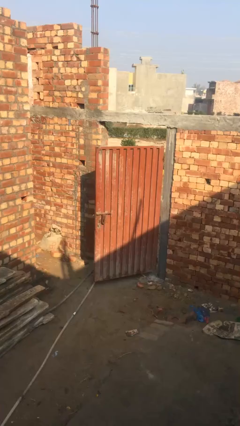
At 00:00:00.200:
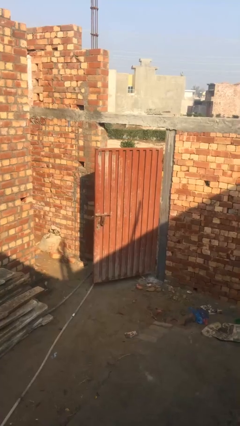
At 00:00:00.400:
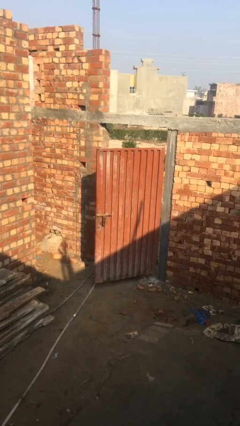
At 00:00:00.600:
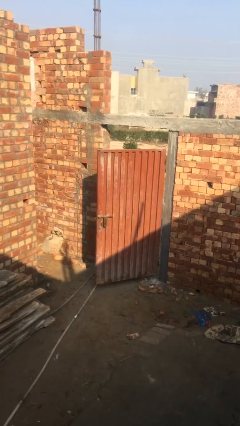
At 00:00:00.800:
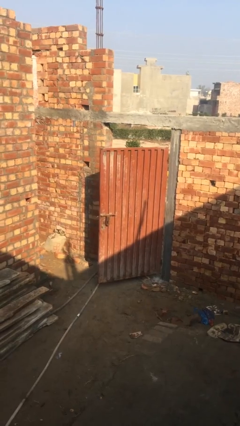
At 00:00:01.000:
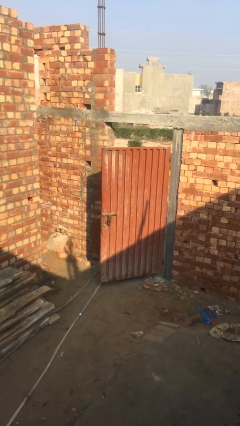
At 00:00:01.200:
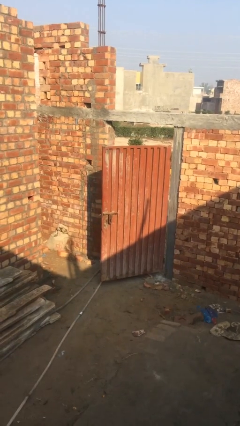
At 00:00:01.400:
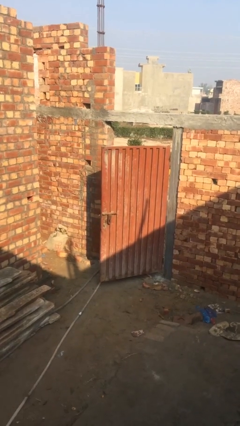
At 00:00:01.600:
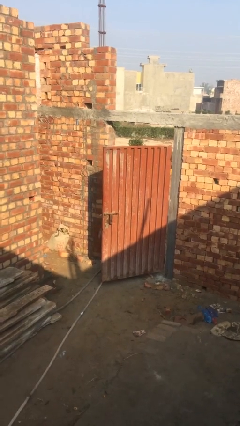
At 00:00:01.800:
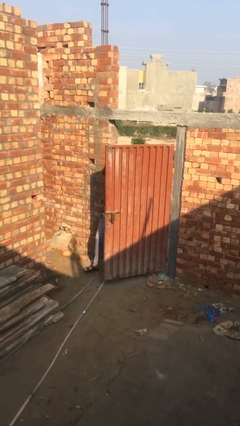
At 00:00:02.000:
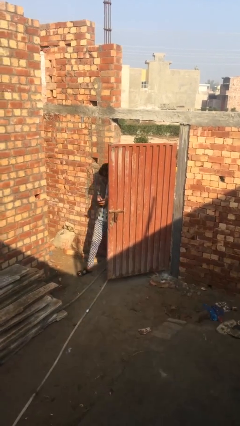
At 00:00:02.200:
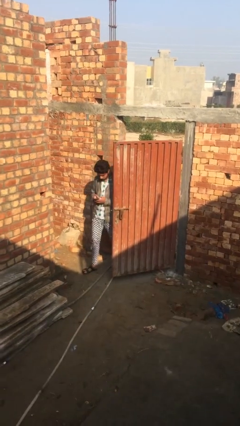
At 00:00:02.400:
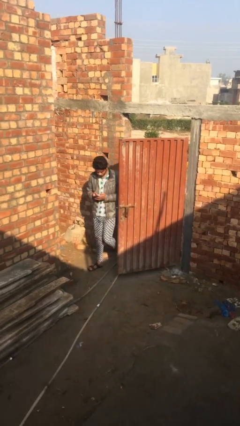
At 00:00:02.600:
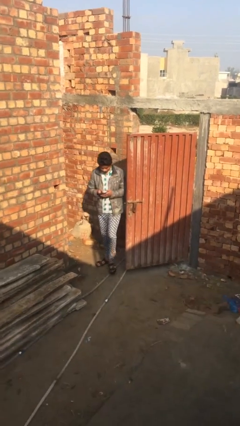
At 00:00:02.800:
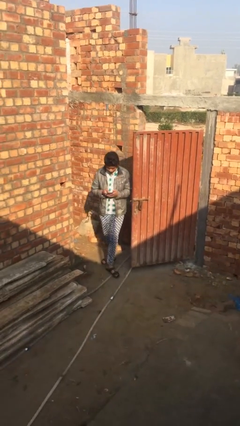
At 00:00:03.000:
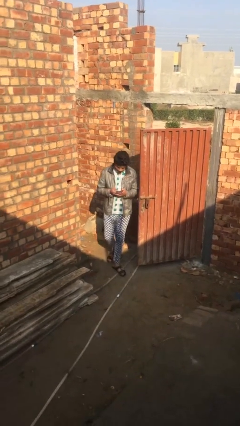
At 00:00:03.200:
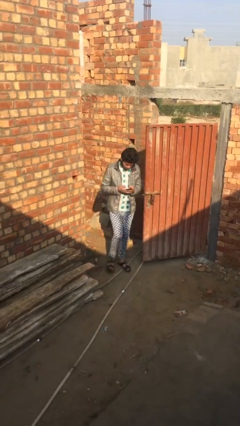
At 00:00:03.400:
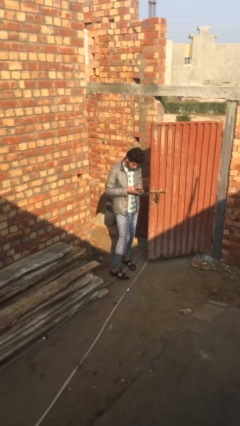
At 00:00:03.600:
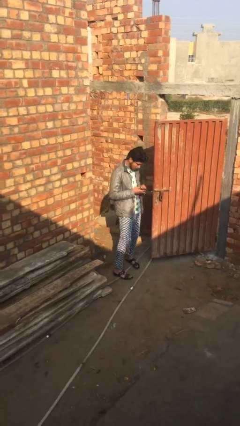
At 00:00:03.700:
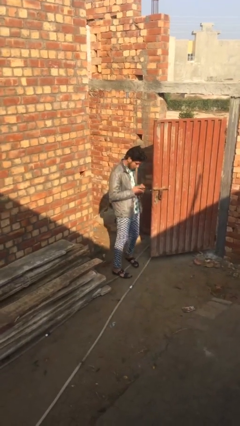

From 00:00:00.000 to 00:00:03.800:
person enters scene through structure

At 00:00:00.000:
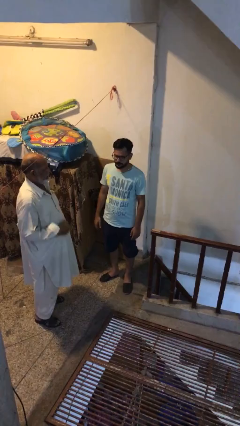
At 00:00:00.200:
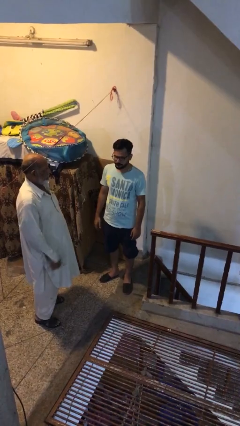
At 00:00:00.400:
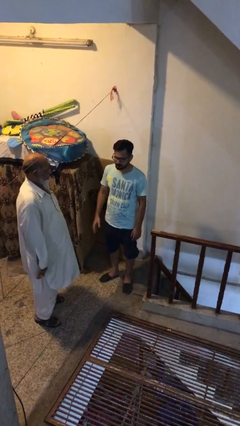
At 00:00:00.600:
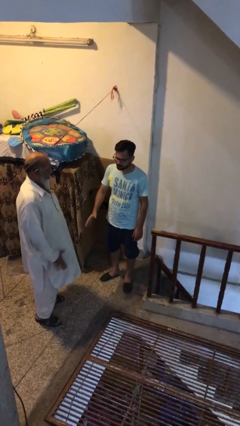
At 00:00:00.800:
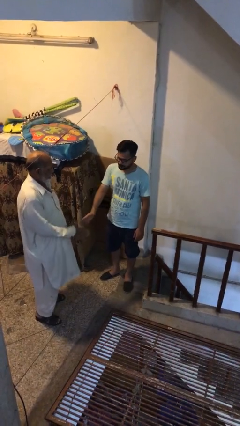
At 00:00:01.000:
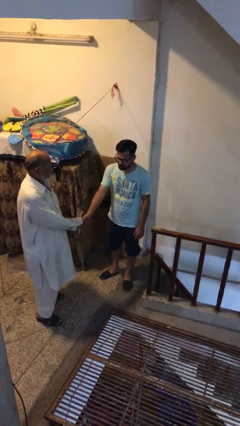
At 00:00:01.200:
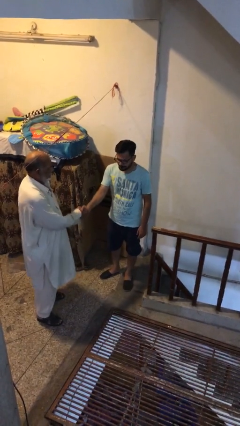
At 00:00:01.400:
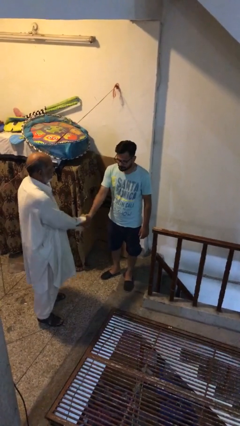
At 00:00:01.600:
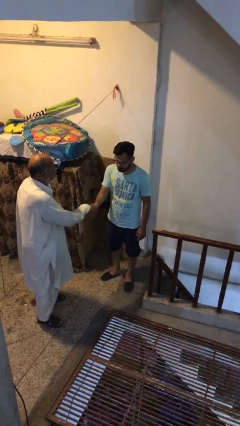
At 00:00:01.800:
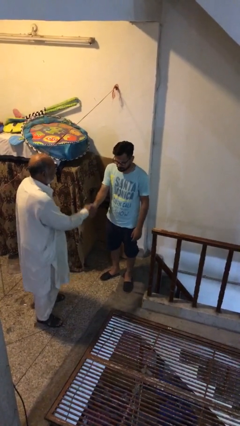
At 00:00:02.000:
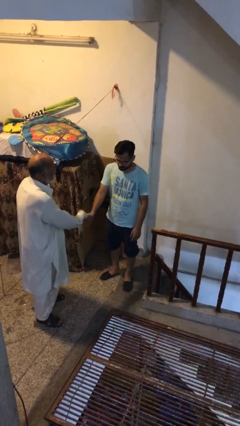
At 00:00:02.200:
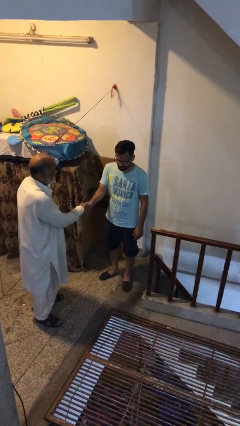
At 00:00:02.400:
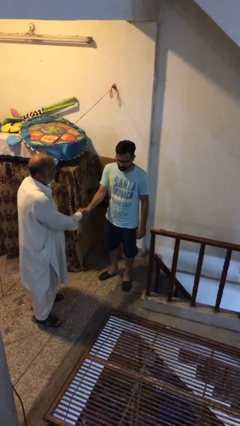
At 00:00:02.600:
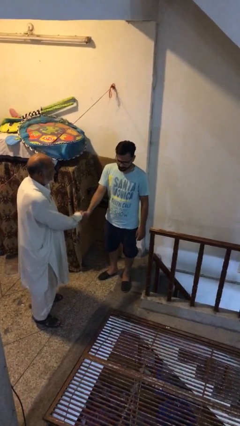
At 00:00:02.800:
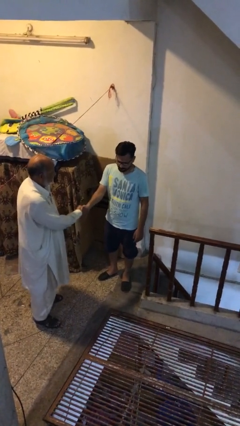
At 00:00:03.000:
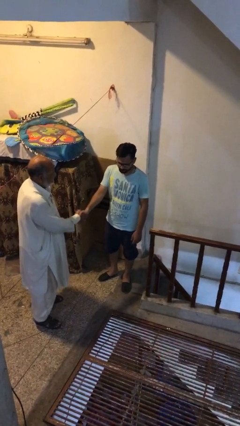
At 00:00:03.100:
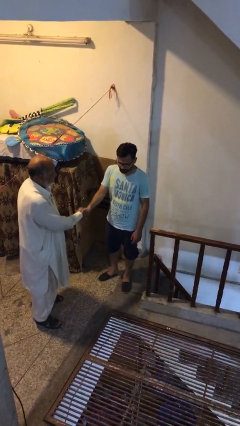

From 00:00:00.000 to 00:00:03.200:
person shakes hand

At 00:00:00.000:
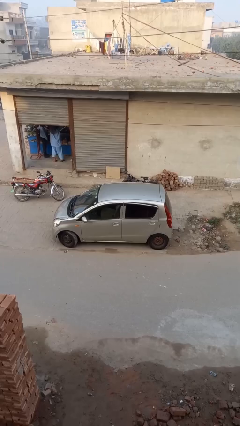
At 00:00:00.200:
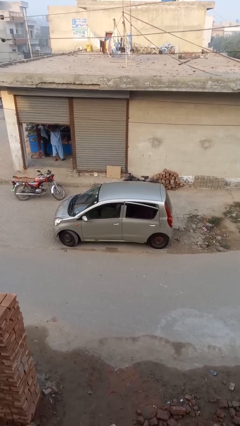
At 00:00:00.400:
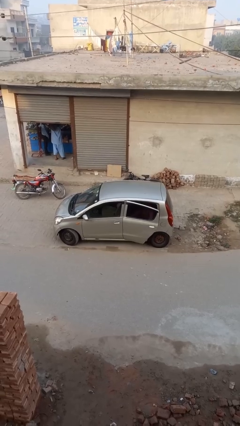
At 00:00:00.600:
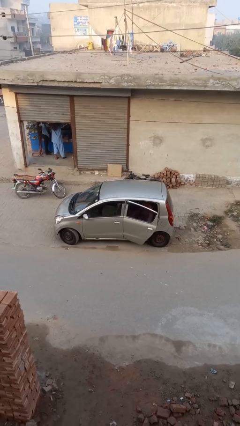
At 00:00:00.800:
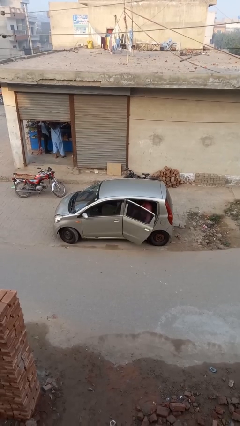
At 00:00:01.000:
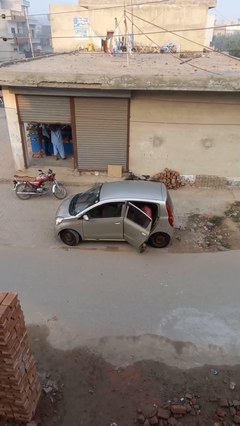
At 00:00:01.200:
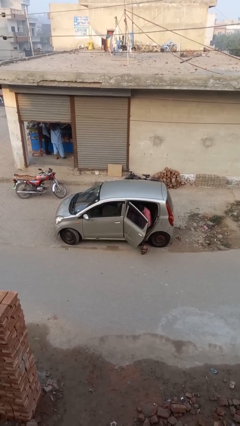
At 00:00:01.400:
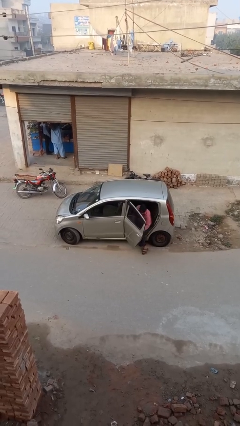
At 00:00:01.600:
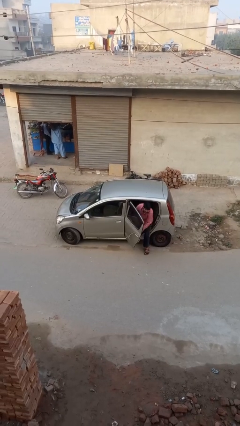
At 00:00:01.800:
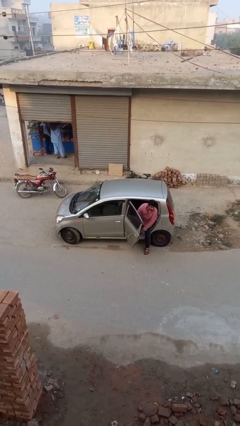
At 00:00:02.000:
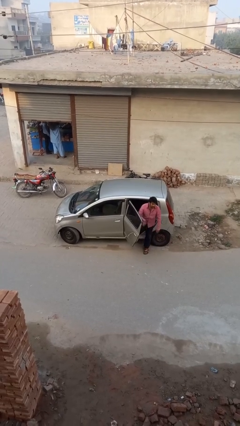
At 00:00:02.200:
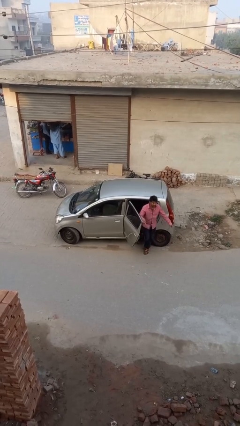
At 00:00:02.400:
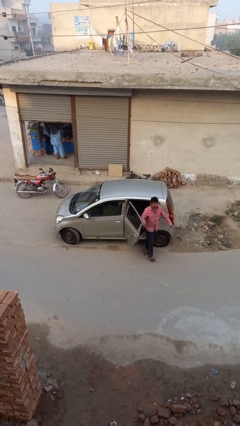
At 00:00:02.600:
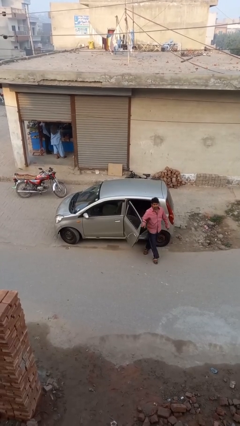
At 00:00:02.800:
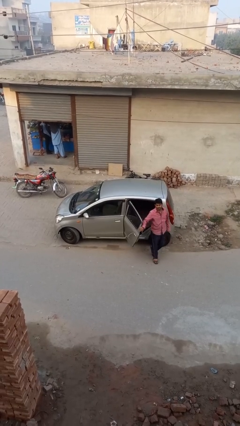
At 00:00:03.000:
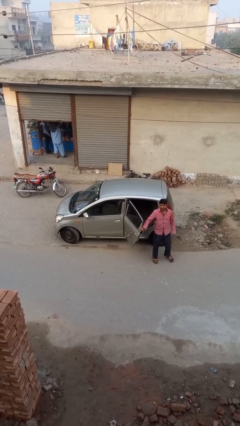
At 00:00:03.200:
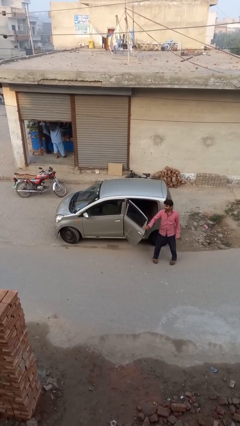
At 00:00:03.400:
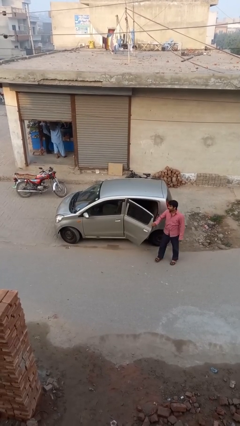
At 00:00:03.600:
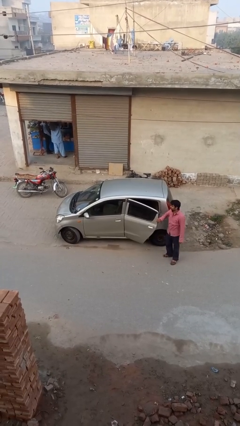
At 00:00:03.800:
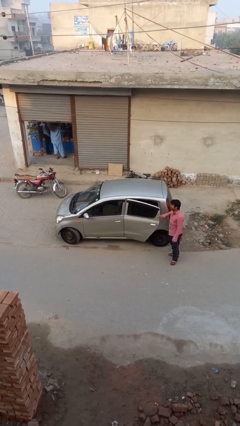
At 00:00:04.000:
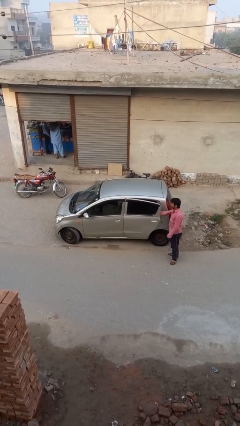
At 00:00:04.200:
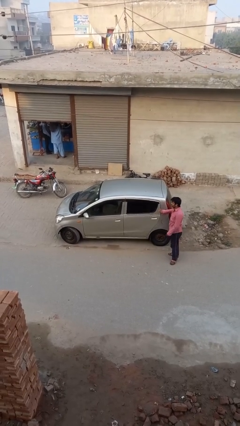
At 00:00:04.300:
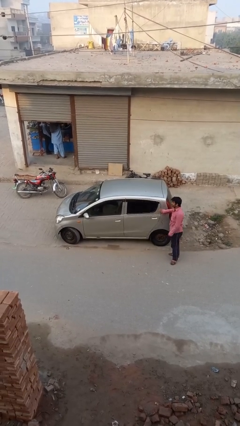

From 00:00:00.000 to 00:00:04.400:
car drops off person

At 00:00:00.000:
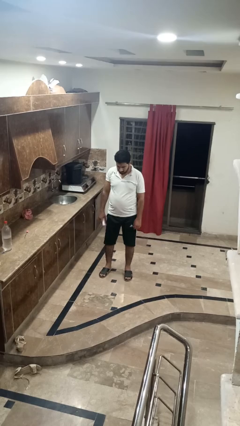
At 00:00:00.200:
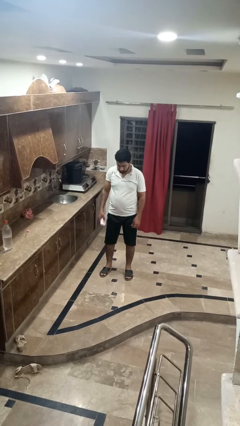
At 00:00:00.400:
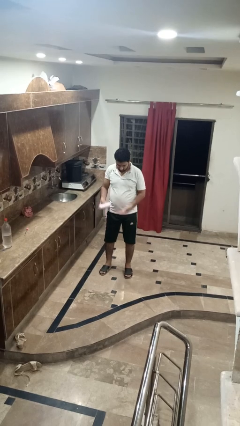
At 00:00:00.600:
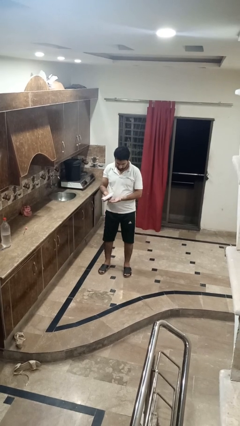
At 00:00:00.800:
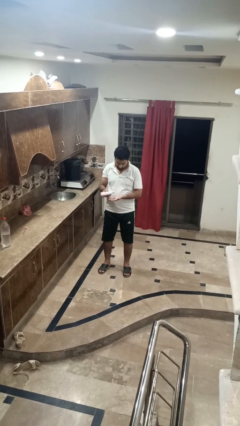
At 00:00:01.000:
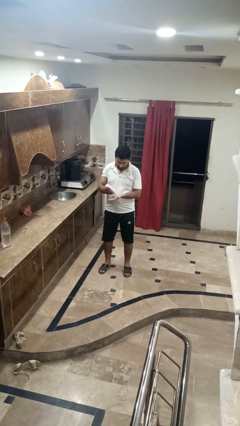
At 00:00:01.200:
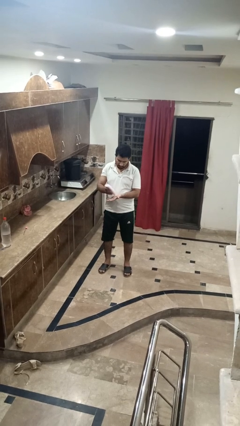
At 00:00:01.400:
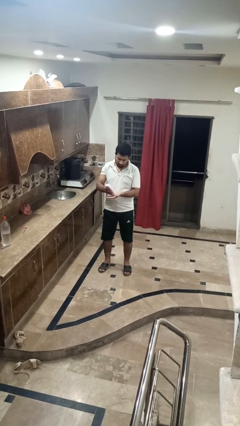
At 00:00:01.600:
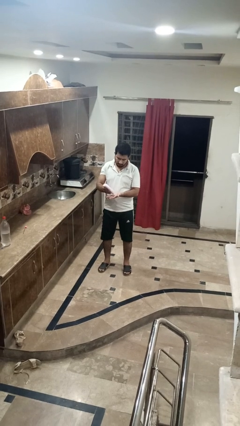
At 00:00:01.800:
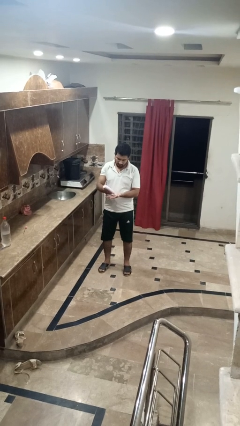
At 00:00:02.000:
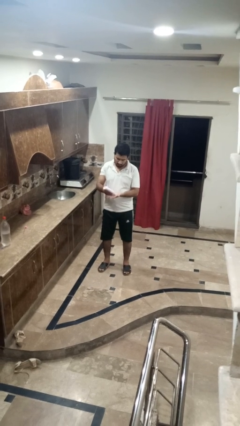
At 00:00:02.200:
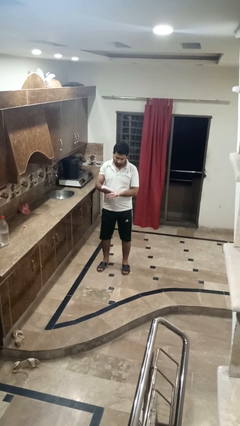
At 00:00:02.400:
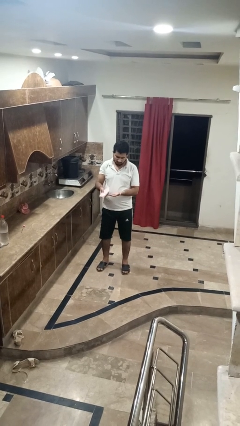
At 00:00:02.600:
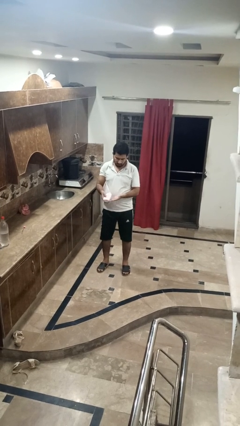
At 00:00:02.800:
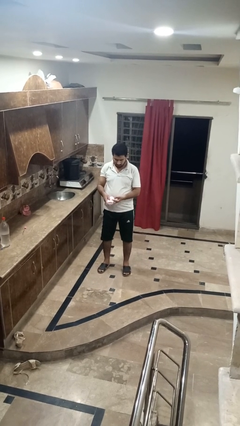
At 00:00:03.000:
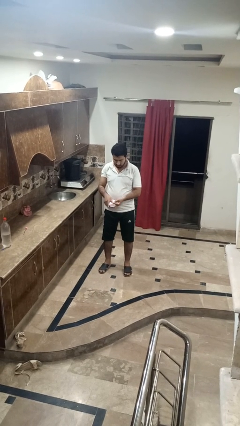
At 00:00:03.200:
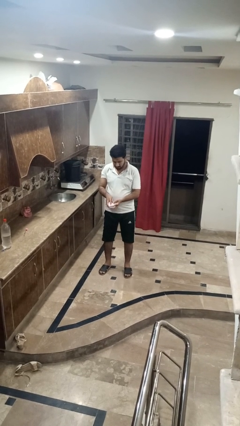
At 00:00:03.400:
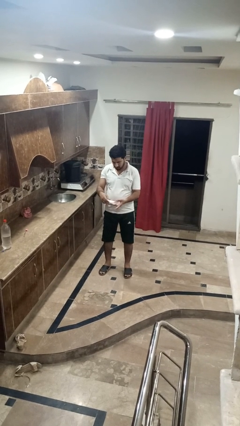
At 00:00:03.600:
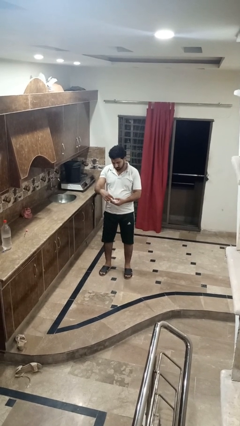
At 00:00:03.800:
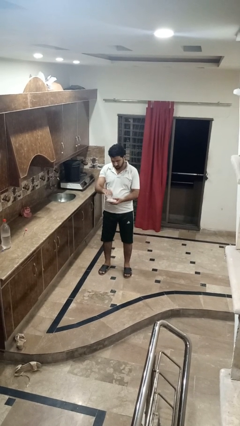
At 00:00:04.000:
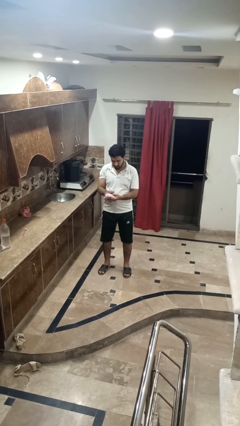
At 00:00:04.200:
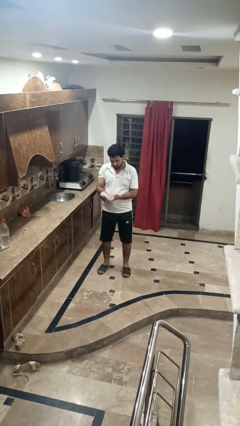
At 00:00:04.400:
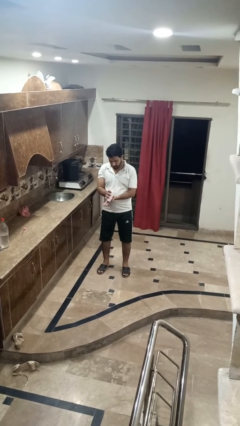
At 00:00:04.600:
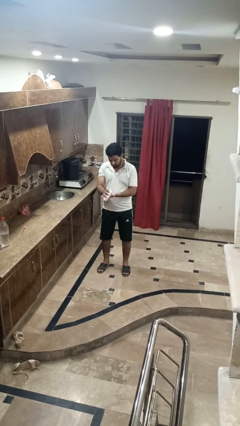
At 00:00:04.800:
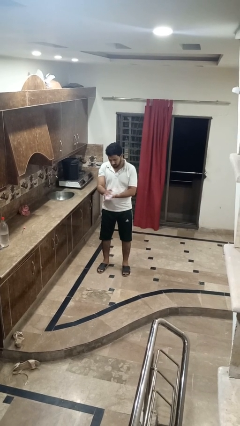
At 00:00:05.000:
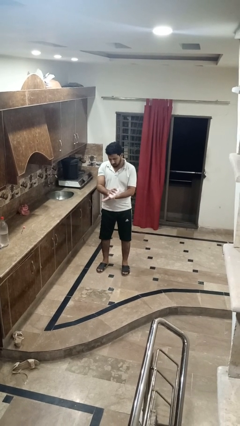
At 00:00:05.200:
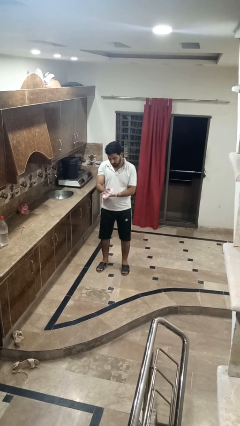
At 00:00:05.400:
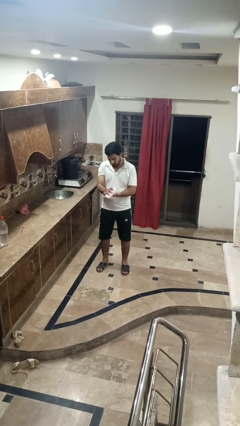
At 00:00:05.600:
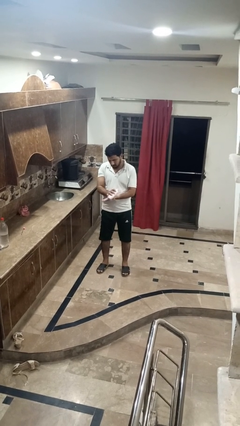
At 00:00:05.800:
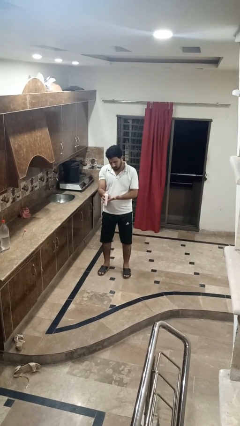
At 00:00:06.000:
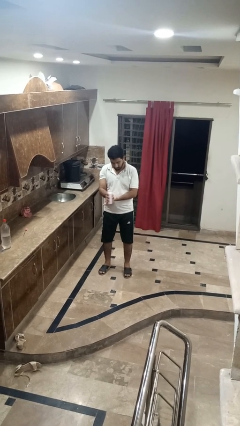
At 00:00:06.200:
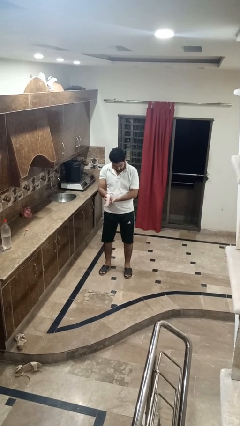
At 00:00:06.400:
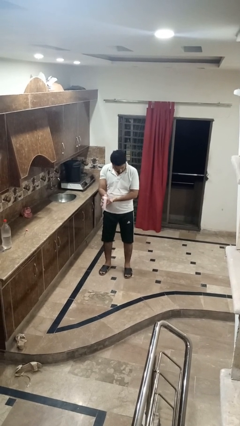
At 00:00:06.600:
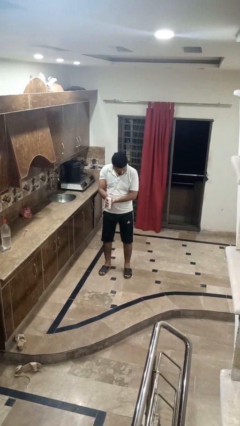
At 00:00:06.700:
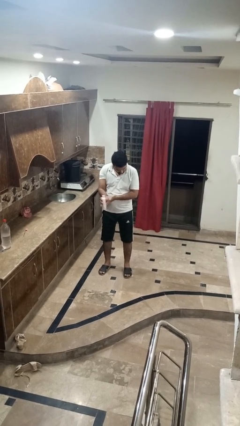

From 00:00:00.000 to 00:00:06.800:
person applies sunscreen
